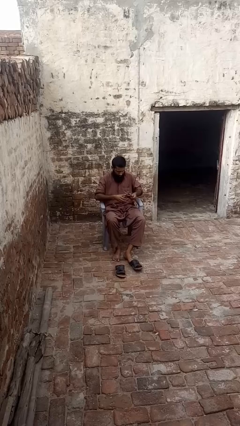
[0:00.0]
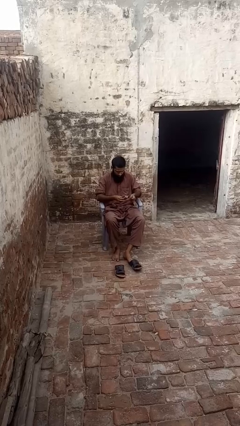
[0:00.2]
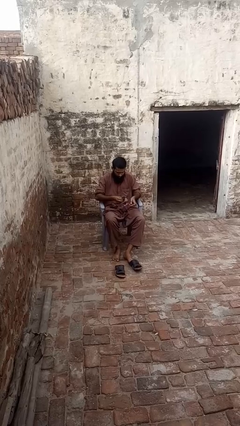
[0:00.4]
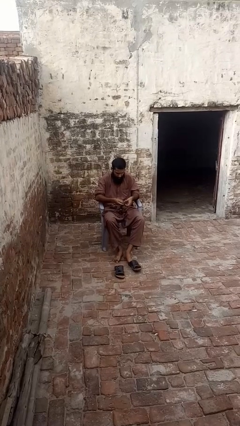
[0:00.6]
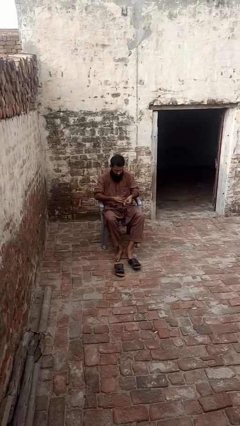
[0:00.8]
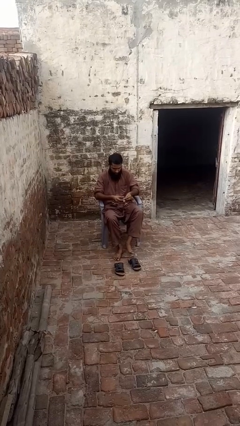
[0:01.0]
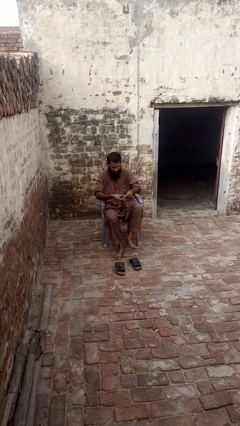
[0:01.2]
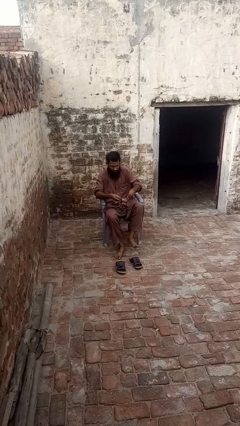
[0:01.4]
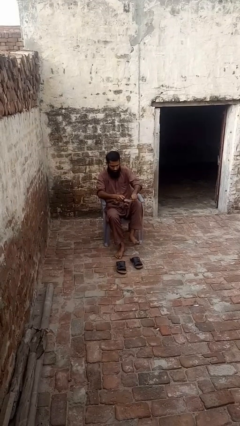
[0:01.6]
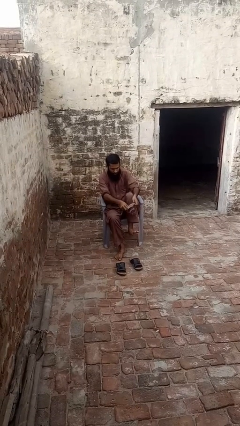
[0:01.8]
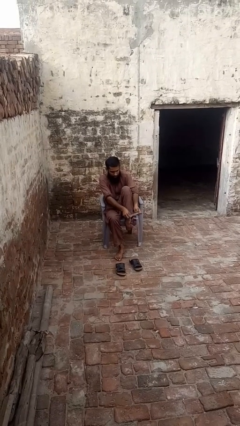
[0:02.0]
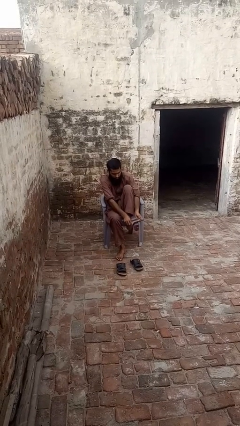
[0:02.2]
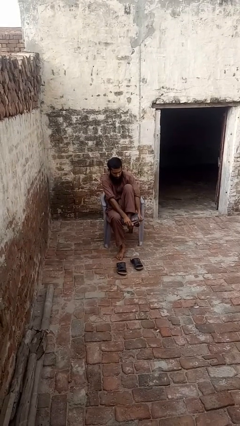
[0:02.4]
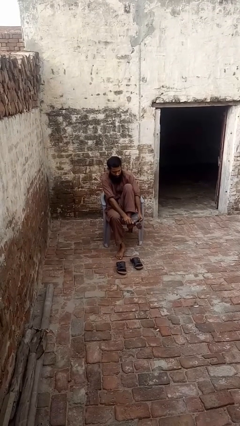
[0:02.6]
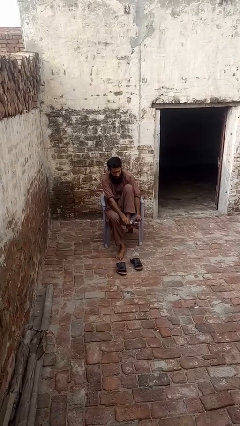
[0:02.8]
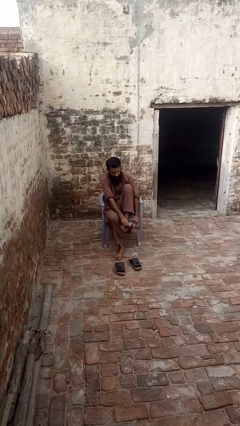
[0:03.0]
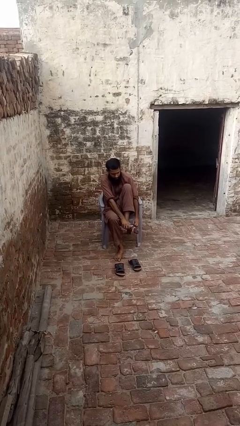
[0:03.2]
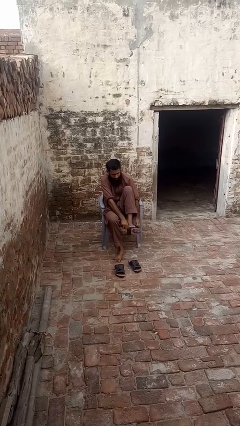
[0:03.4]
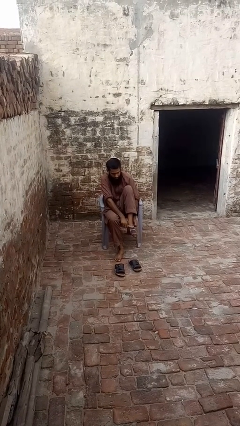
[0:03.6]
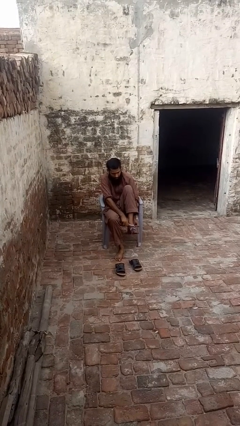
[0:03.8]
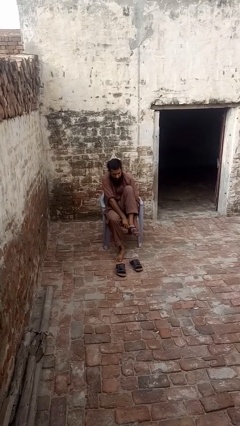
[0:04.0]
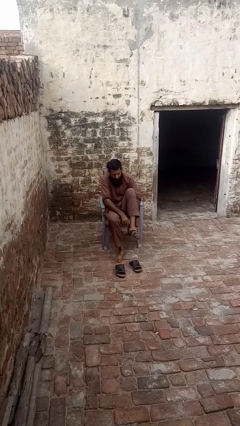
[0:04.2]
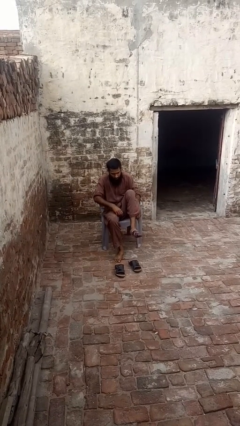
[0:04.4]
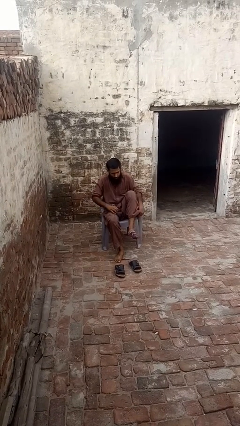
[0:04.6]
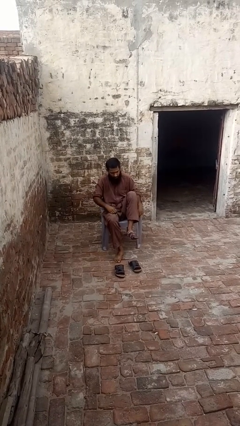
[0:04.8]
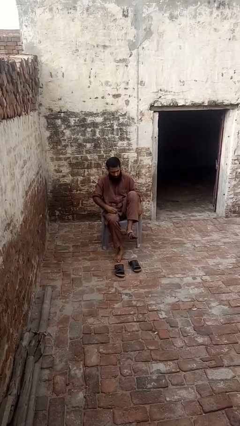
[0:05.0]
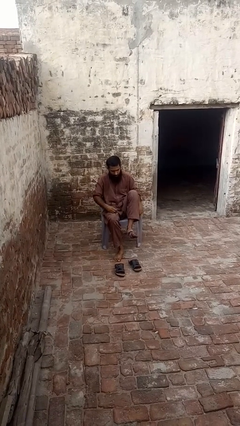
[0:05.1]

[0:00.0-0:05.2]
person puts on socks

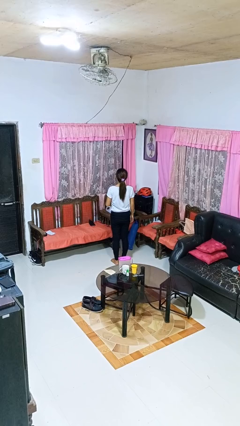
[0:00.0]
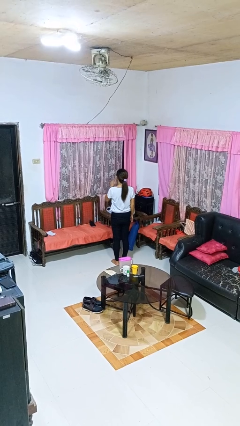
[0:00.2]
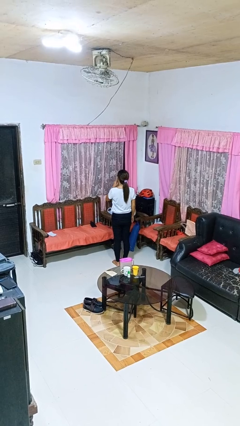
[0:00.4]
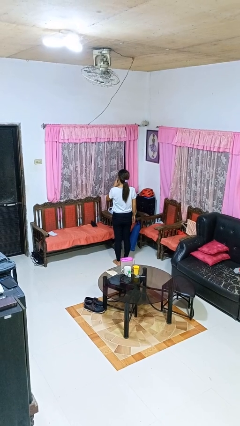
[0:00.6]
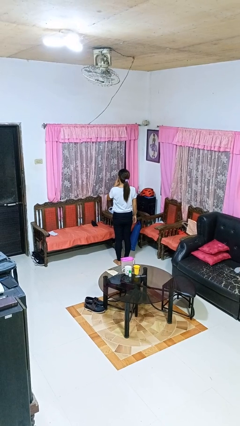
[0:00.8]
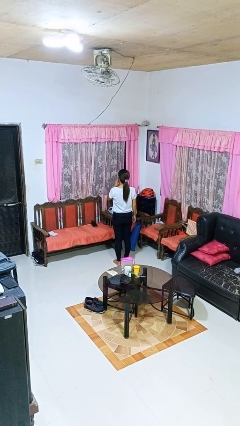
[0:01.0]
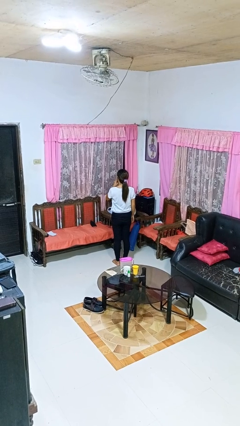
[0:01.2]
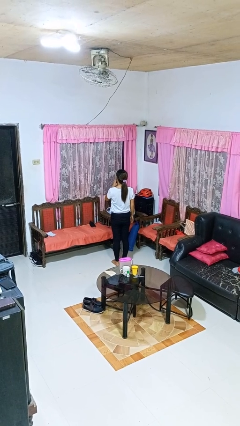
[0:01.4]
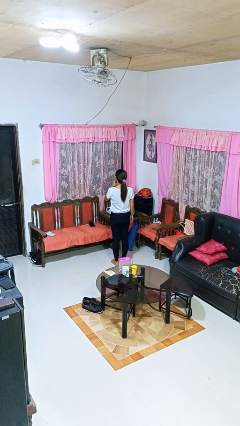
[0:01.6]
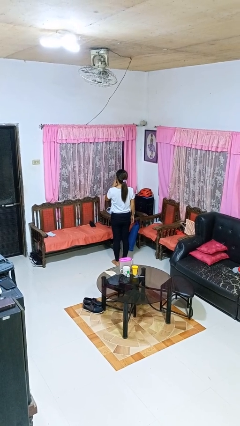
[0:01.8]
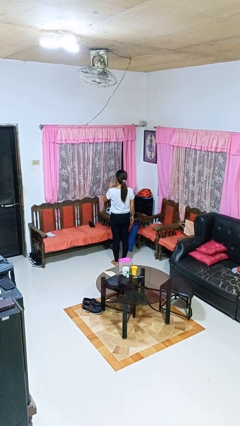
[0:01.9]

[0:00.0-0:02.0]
person gestures be quiet

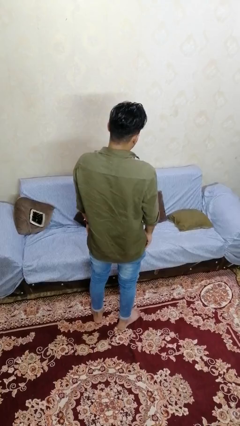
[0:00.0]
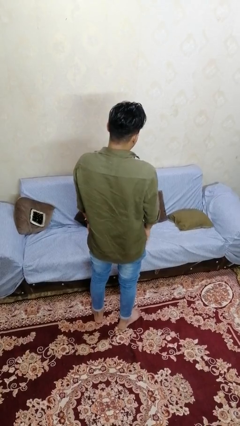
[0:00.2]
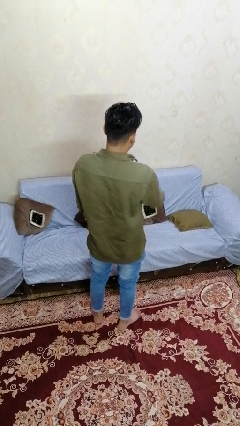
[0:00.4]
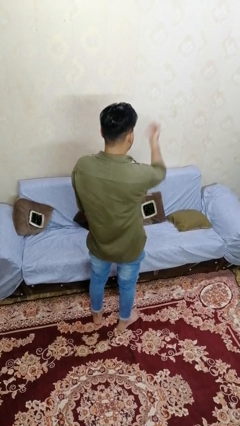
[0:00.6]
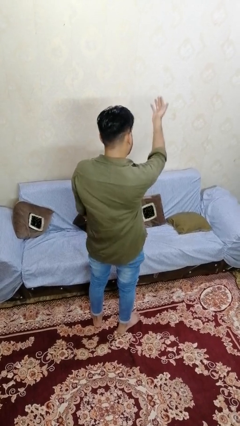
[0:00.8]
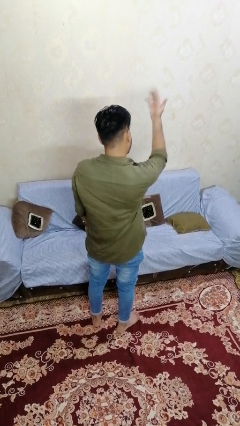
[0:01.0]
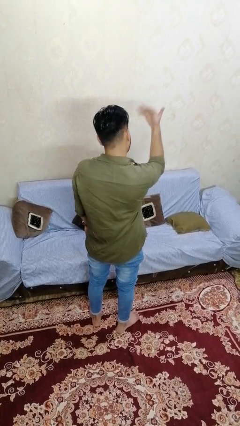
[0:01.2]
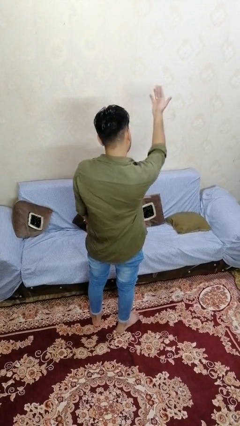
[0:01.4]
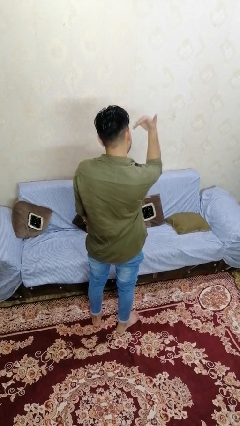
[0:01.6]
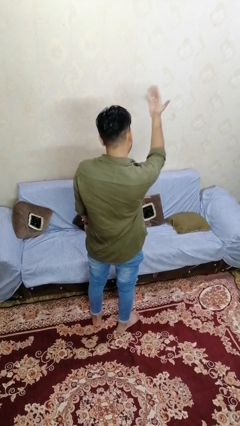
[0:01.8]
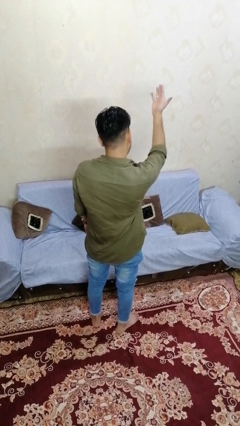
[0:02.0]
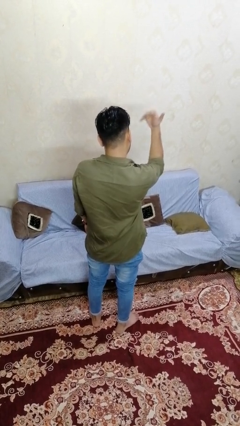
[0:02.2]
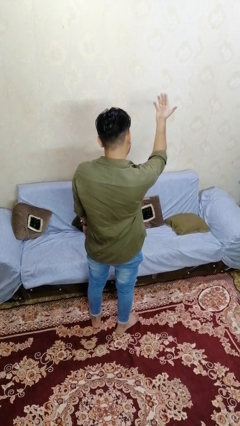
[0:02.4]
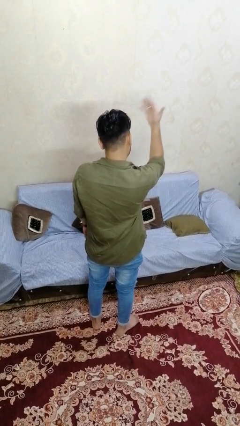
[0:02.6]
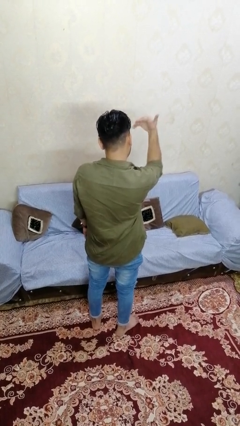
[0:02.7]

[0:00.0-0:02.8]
person gestures come here

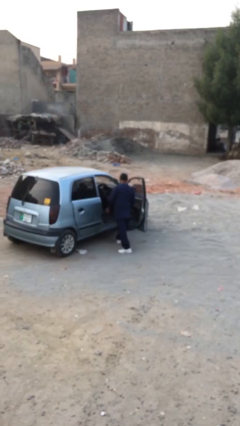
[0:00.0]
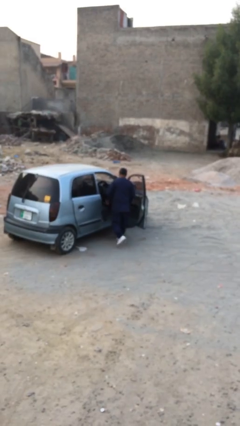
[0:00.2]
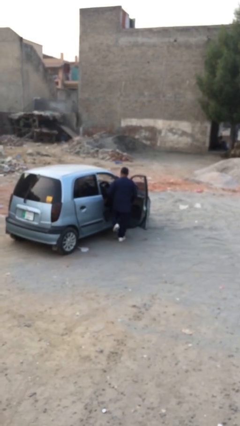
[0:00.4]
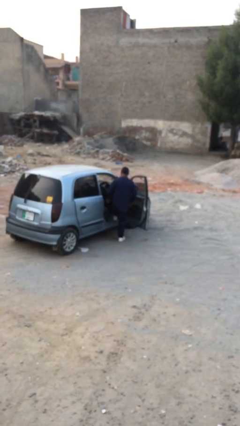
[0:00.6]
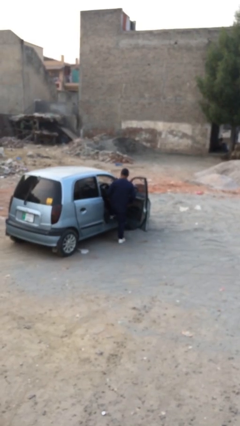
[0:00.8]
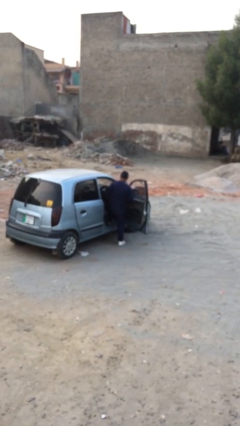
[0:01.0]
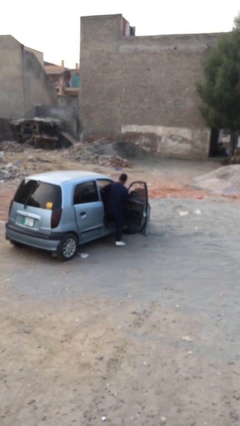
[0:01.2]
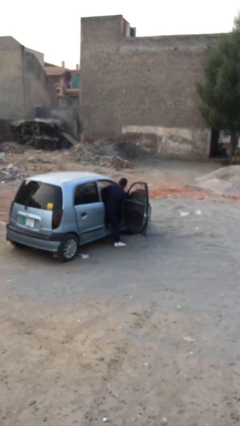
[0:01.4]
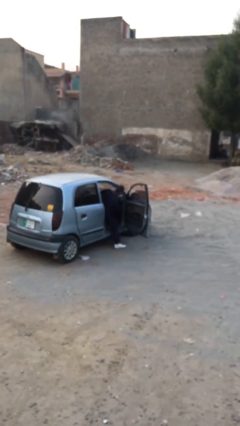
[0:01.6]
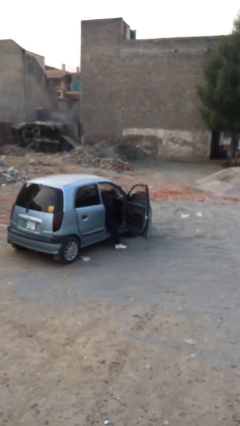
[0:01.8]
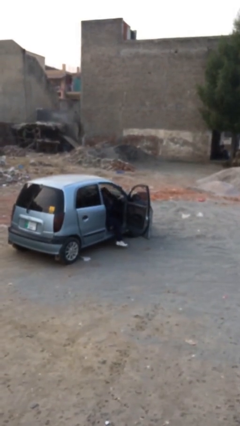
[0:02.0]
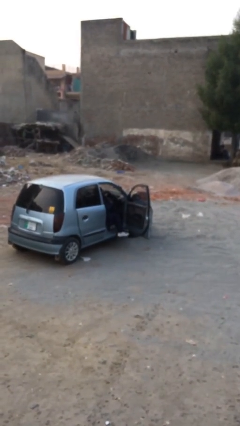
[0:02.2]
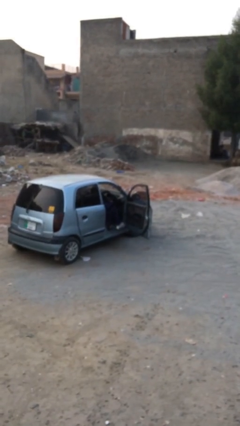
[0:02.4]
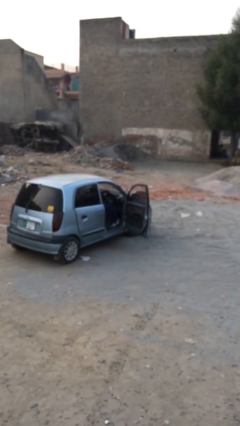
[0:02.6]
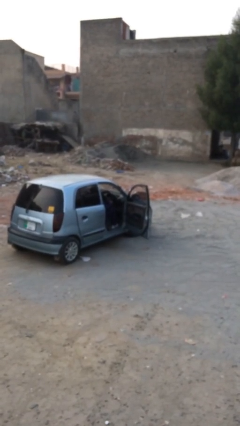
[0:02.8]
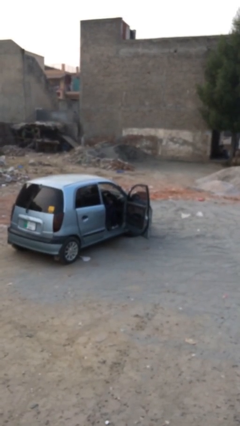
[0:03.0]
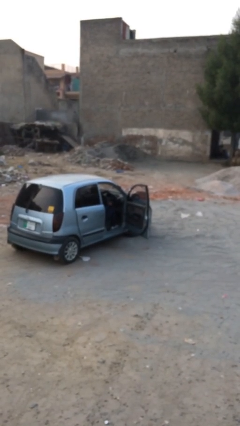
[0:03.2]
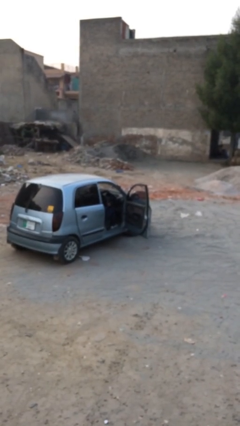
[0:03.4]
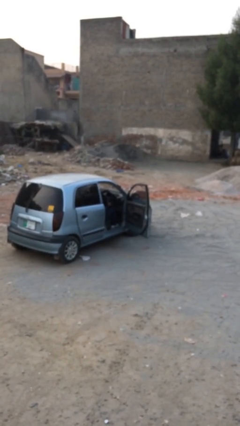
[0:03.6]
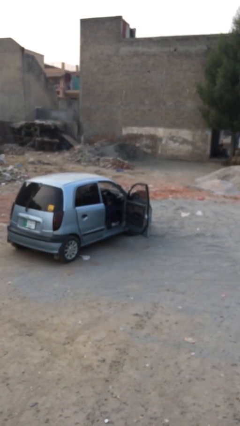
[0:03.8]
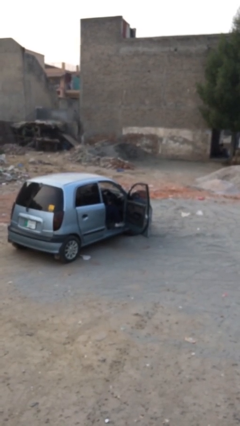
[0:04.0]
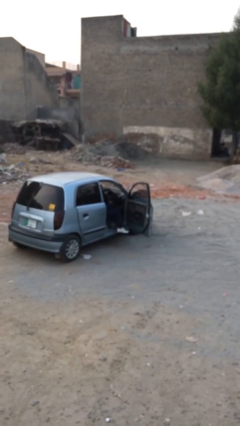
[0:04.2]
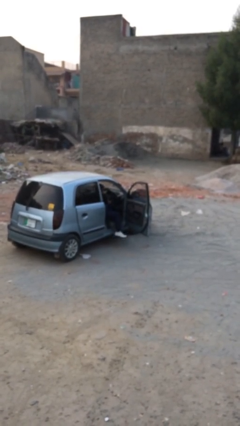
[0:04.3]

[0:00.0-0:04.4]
person enters car

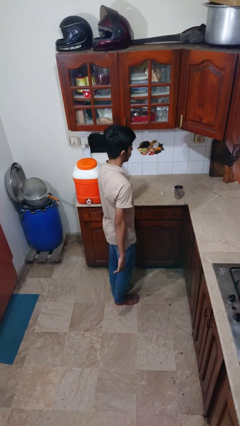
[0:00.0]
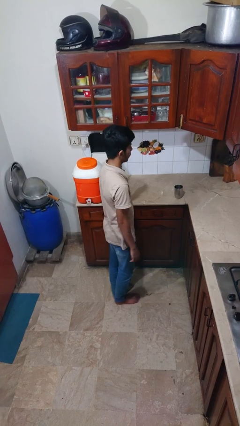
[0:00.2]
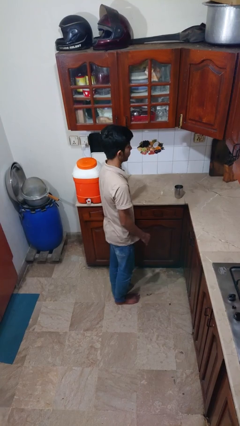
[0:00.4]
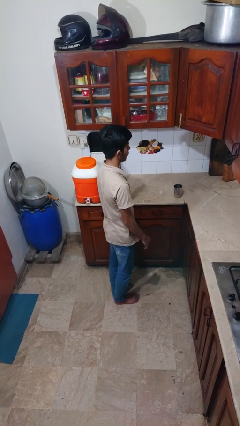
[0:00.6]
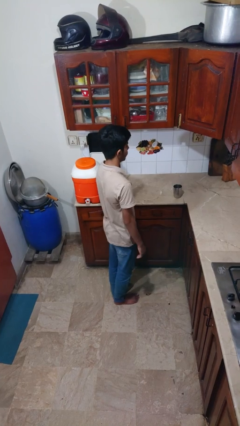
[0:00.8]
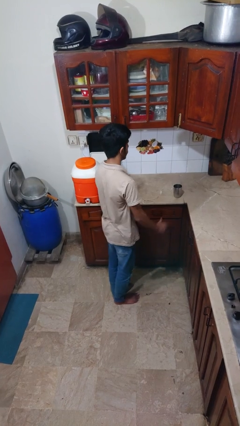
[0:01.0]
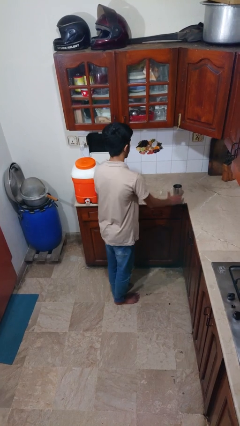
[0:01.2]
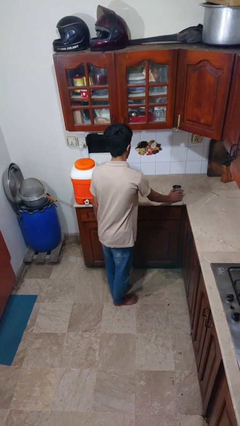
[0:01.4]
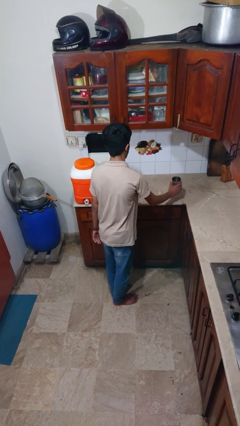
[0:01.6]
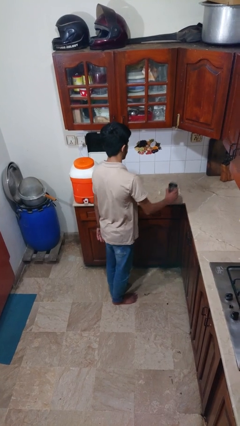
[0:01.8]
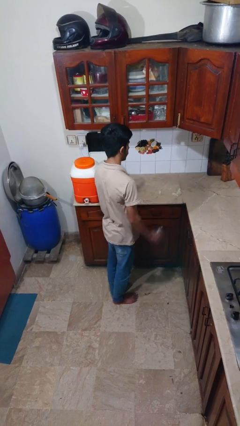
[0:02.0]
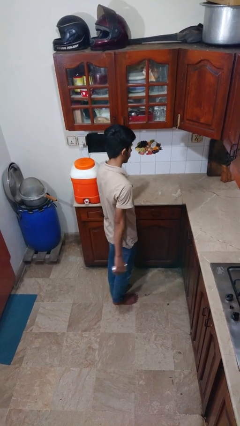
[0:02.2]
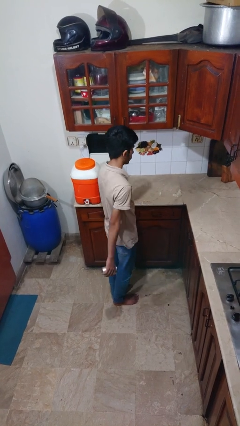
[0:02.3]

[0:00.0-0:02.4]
person picks up object from countertop

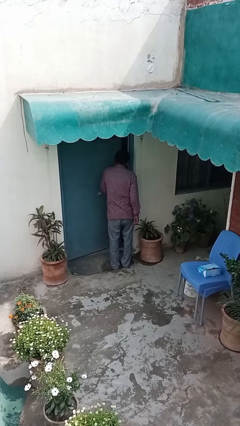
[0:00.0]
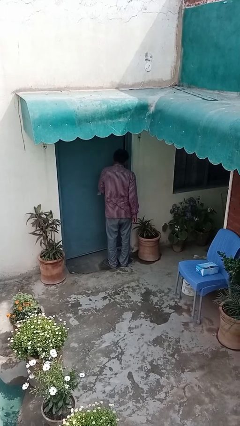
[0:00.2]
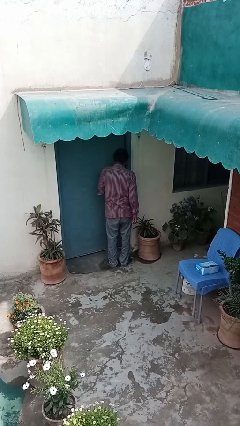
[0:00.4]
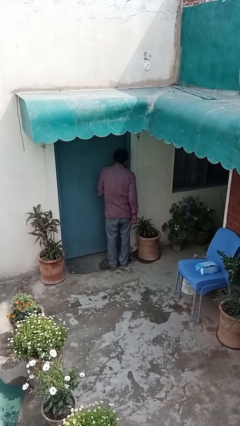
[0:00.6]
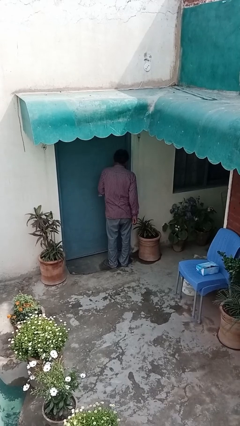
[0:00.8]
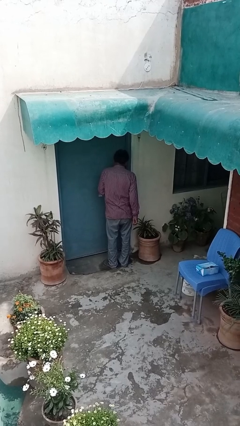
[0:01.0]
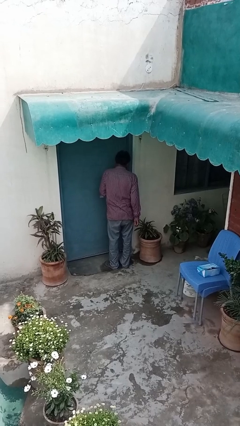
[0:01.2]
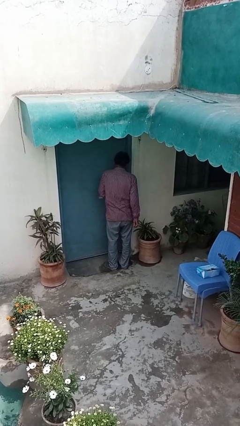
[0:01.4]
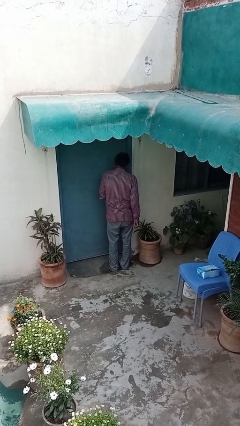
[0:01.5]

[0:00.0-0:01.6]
person closes facility door
